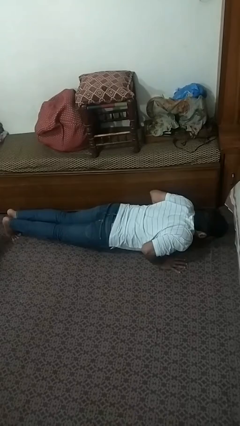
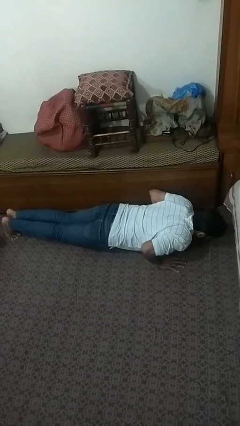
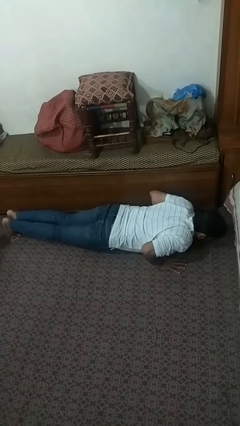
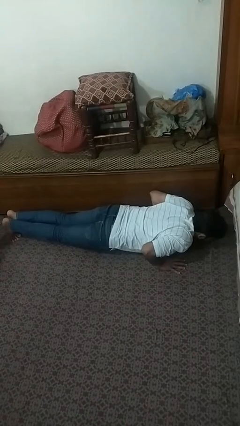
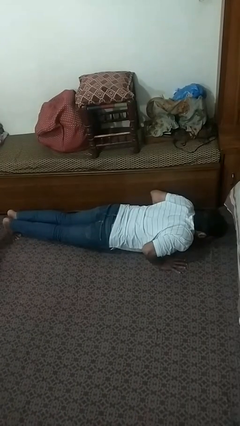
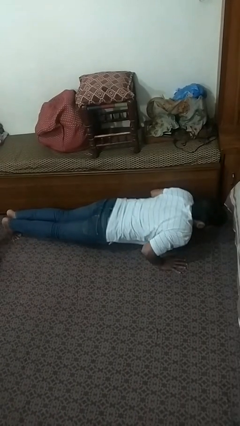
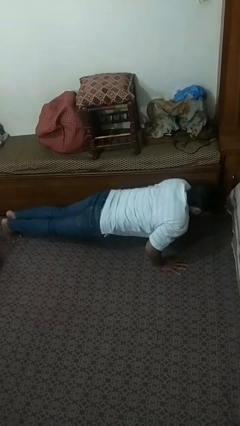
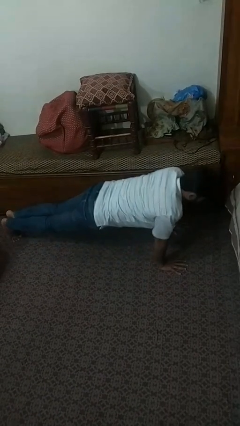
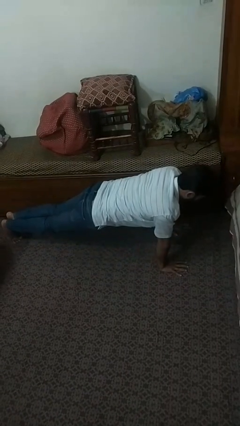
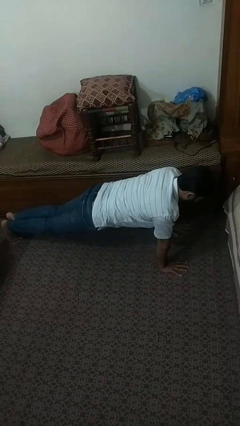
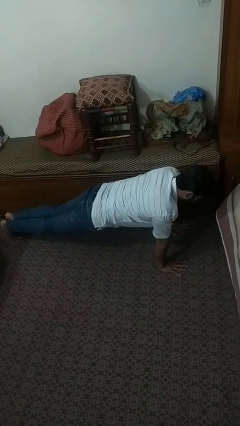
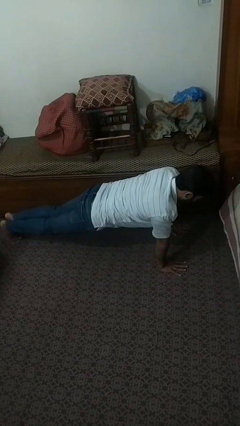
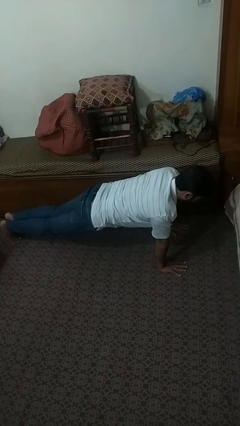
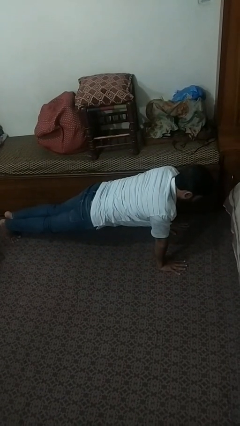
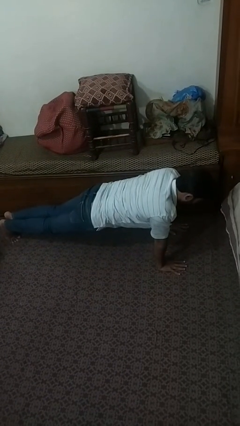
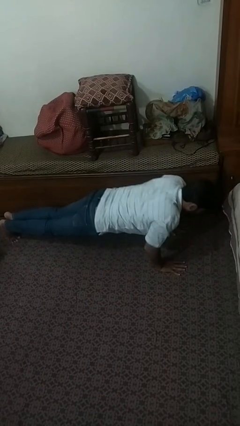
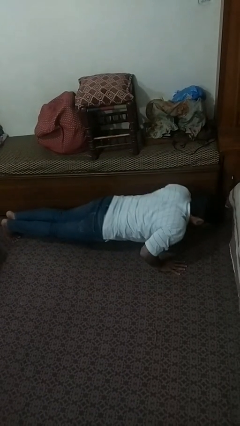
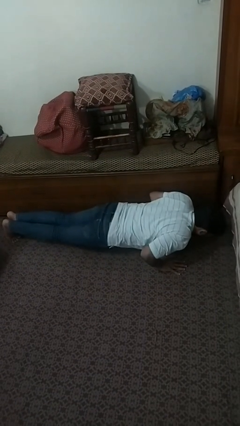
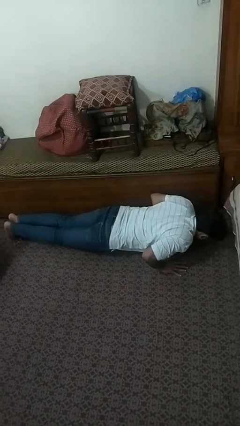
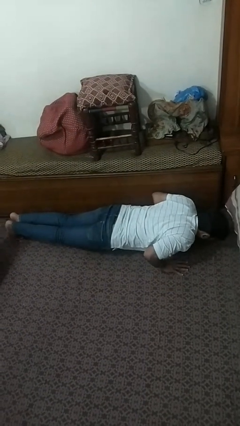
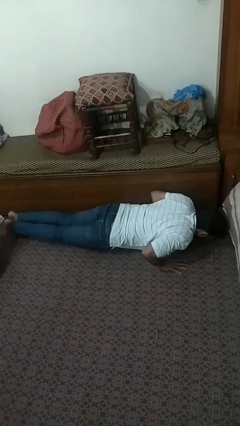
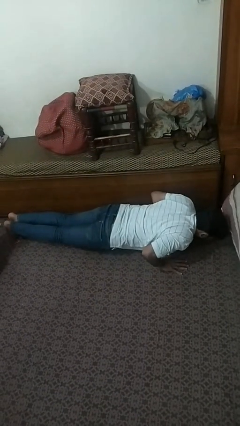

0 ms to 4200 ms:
person exercises with pushup

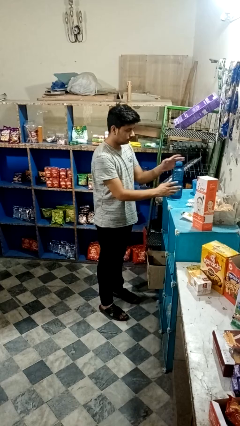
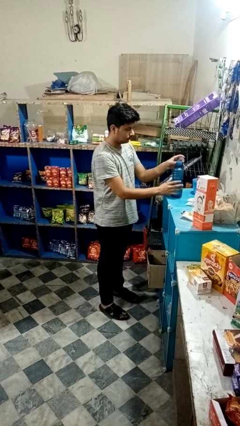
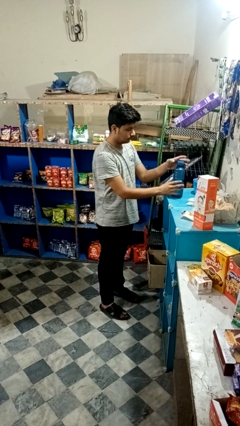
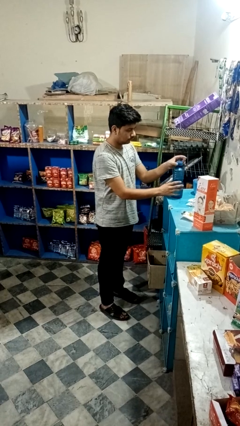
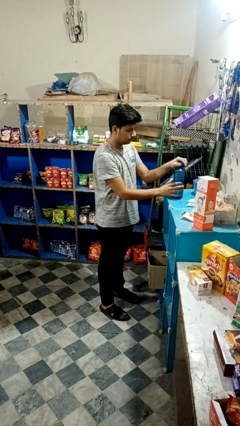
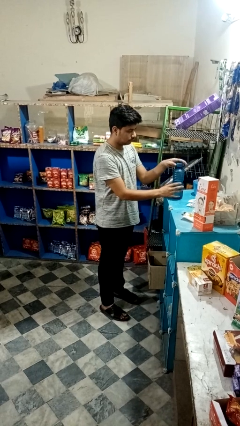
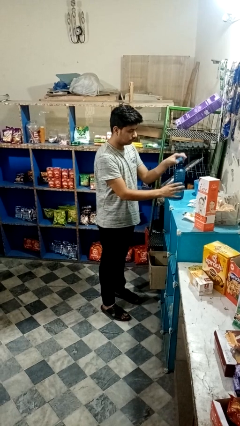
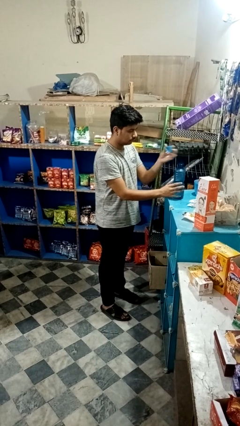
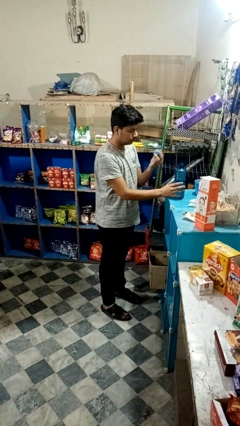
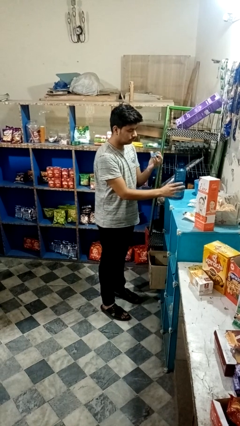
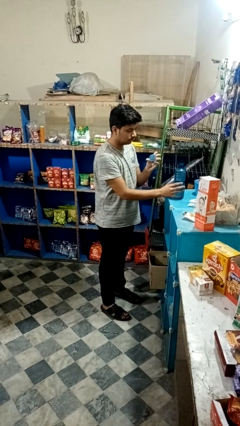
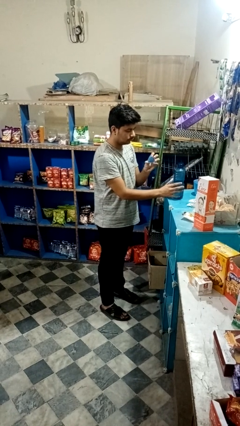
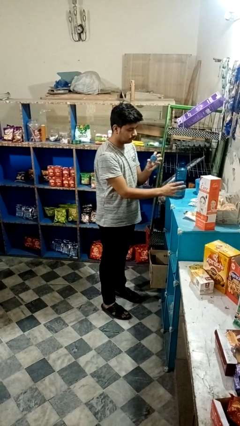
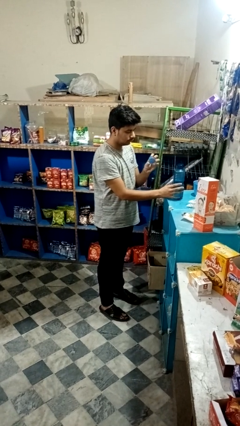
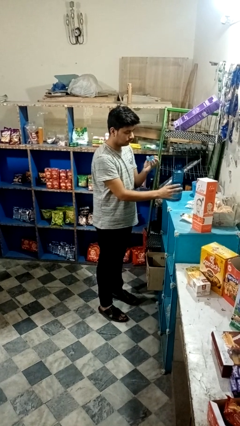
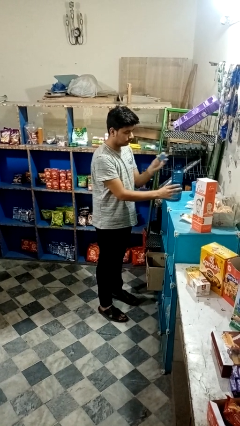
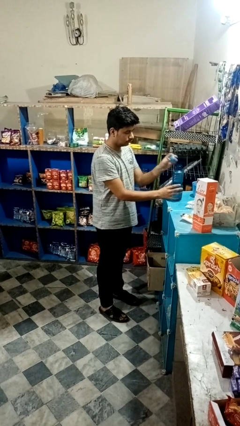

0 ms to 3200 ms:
person unscrews lid from bottle

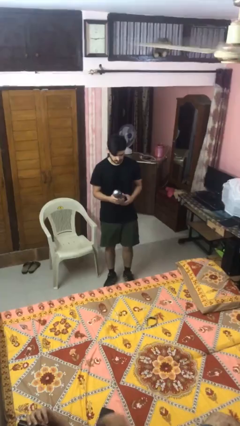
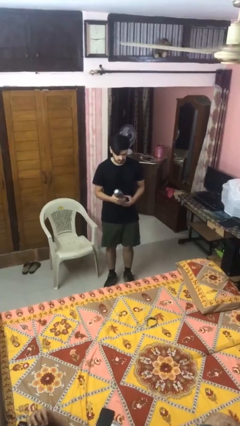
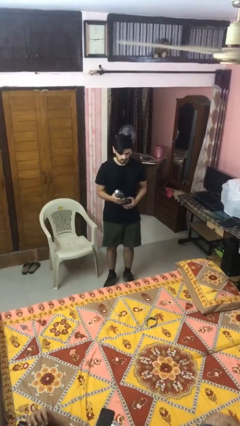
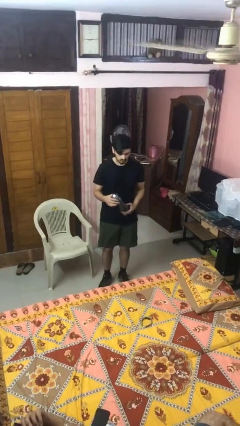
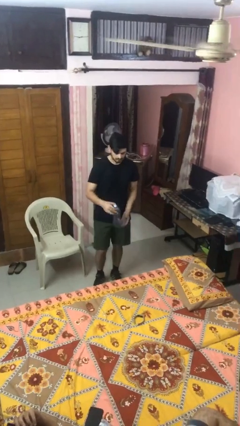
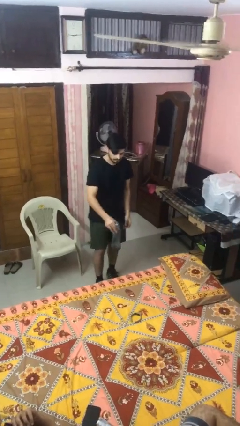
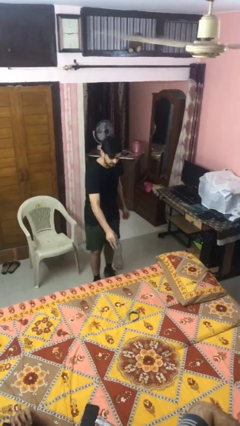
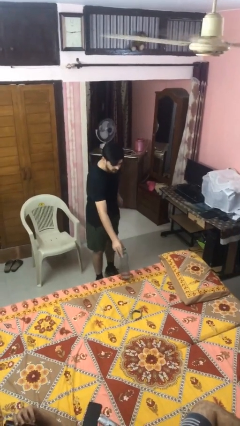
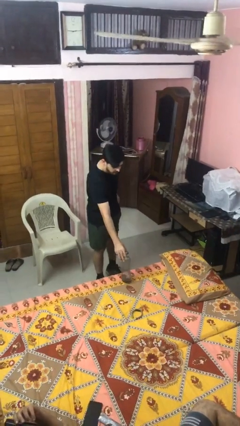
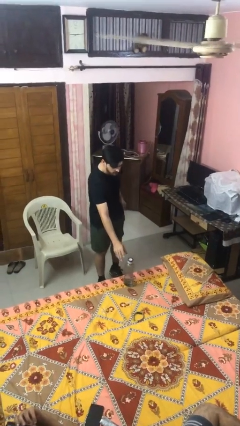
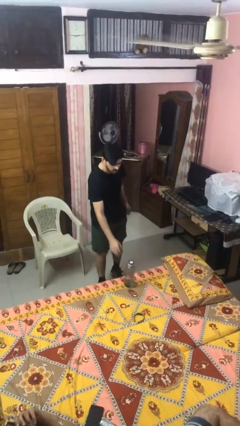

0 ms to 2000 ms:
person puts down object on bed

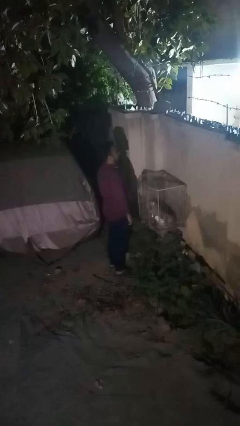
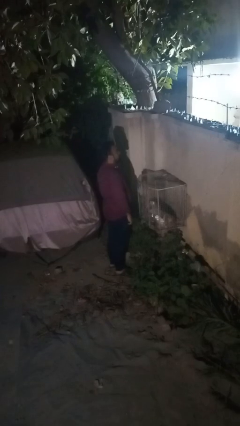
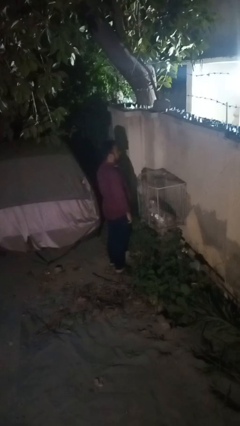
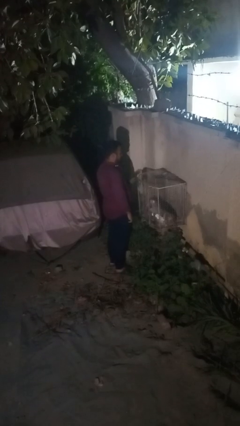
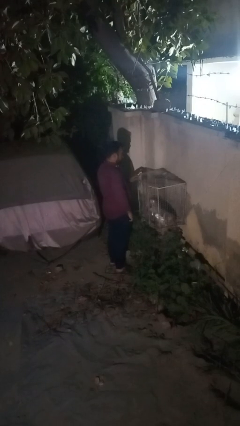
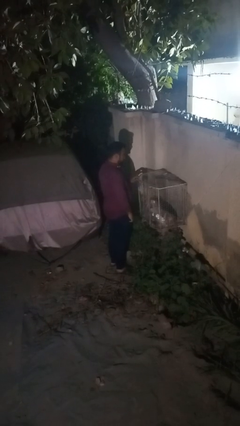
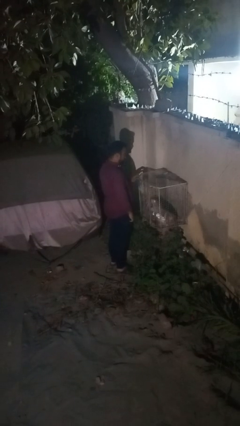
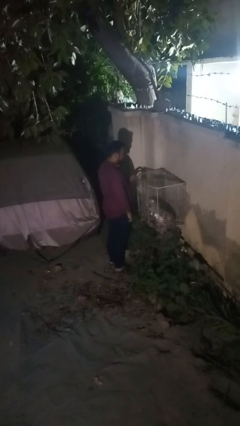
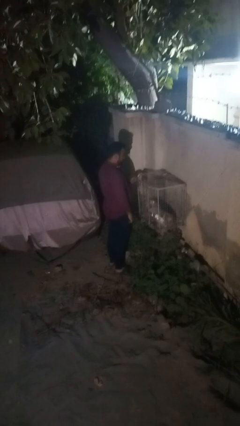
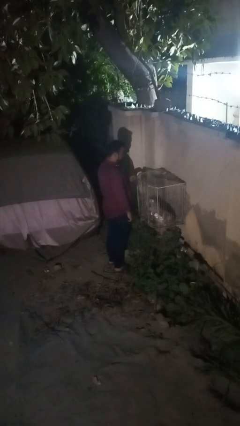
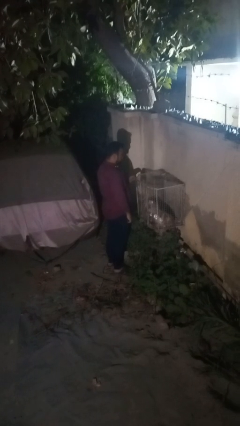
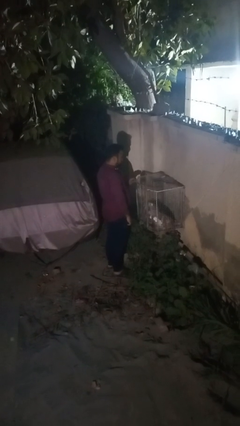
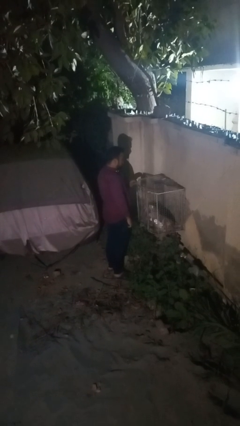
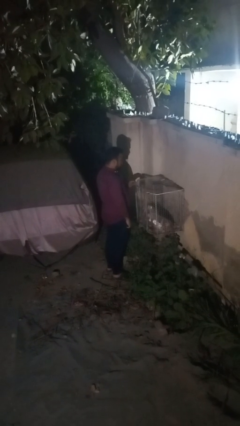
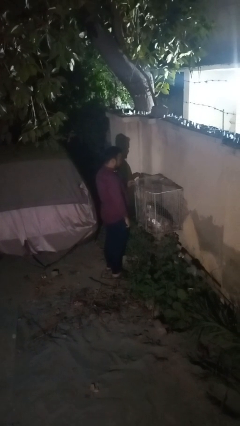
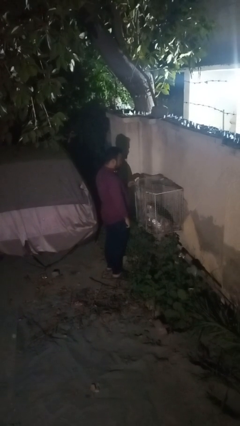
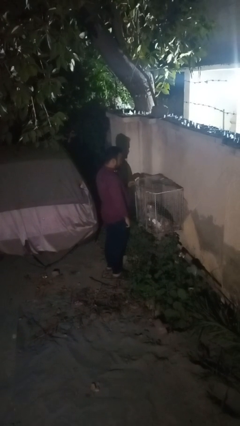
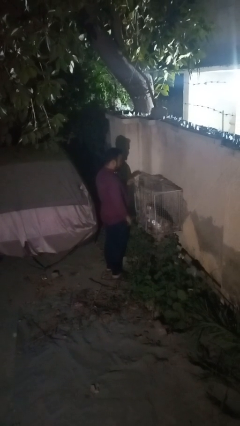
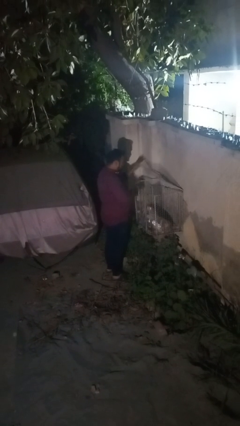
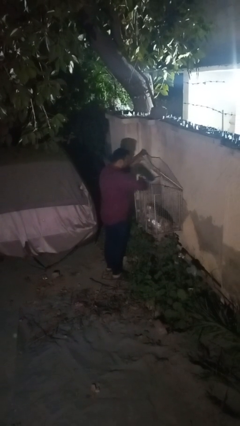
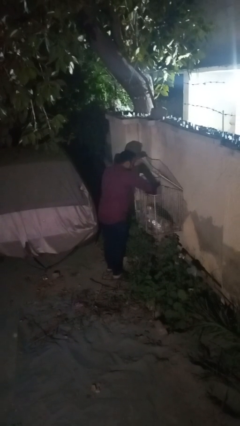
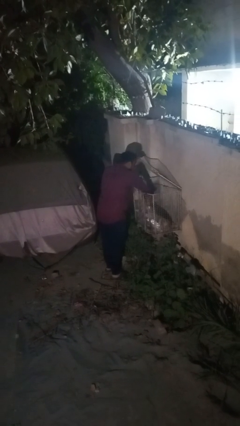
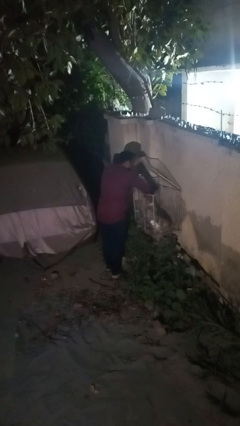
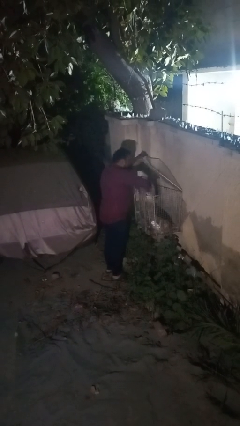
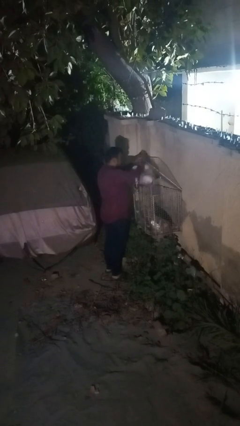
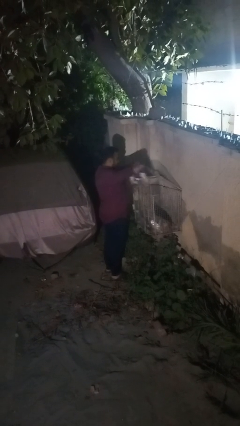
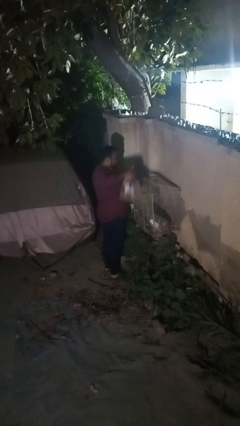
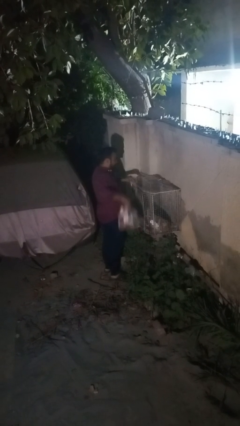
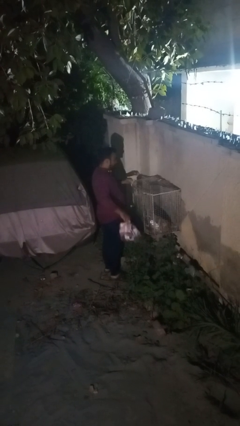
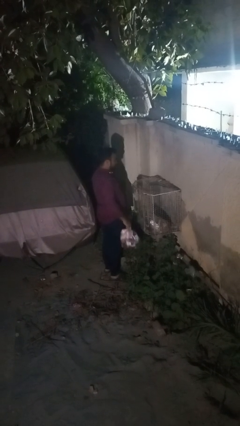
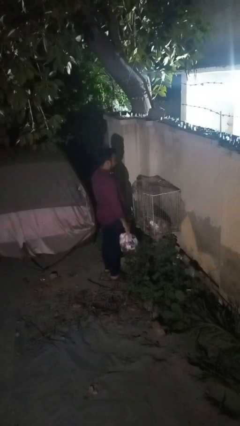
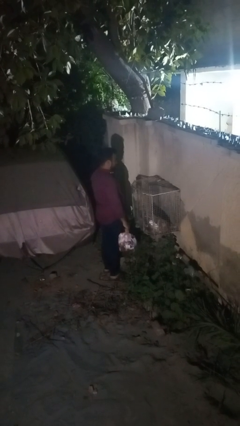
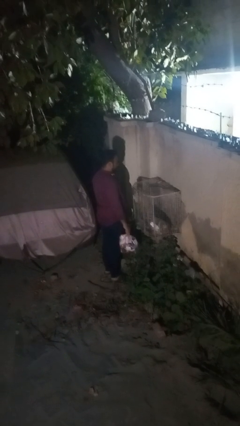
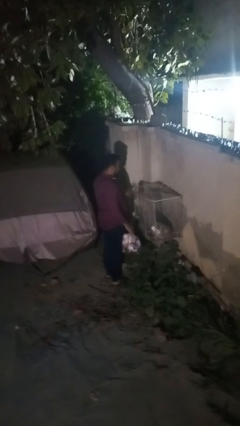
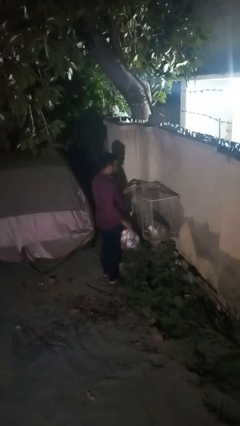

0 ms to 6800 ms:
person removes trashbag from trashcan

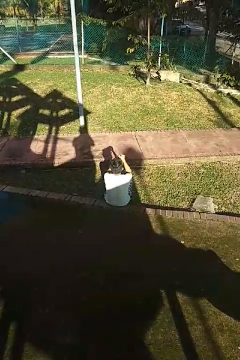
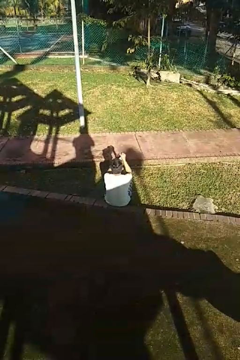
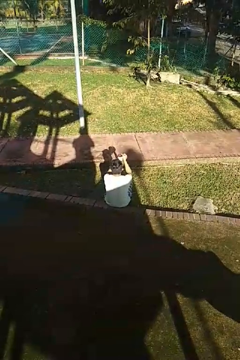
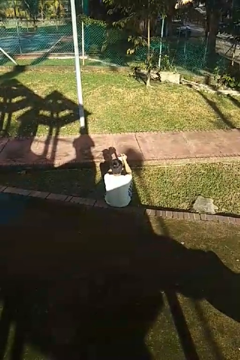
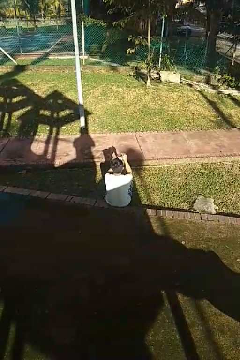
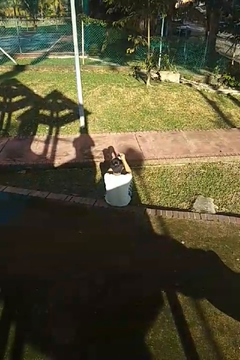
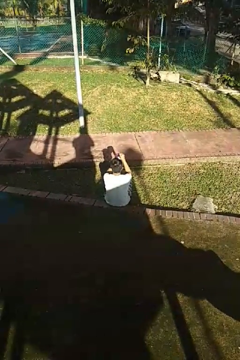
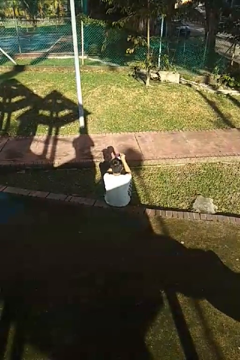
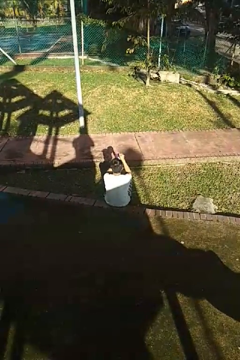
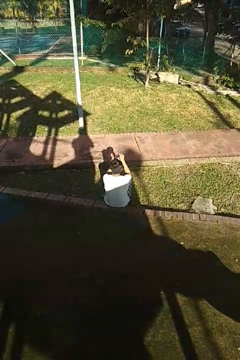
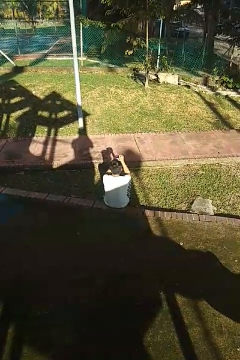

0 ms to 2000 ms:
person stirs mug
